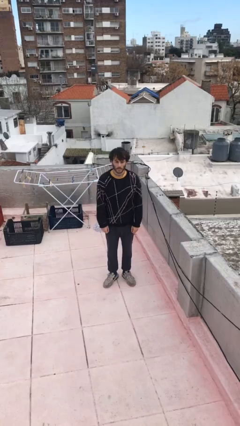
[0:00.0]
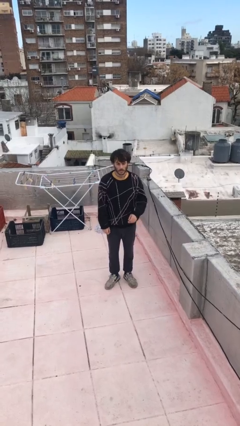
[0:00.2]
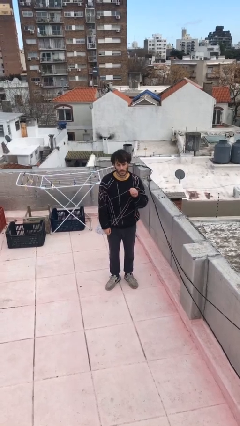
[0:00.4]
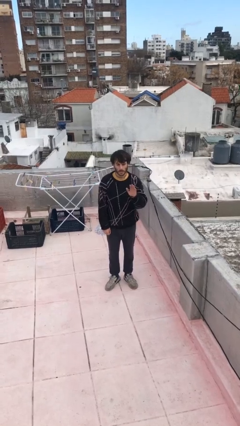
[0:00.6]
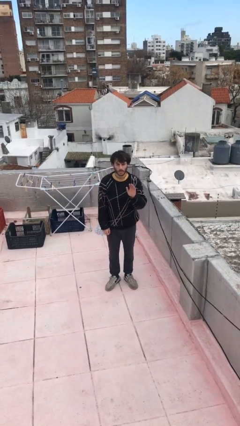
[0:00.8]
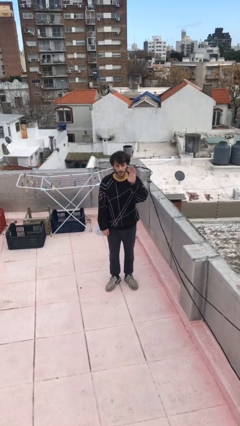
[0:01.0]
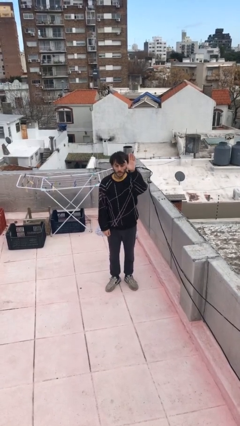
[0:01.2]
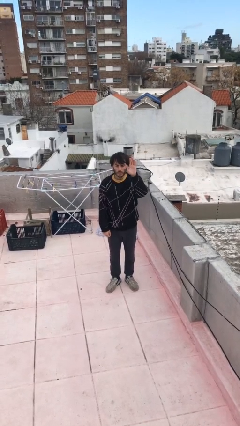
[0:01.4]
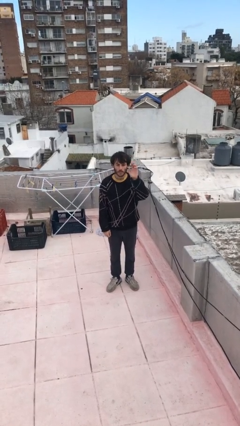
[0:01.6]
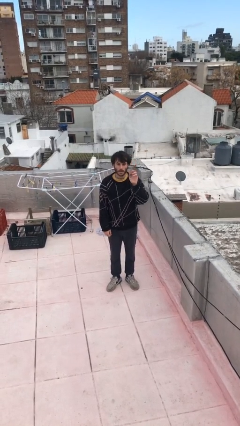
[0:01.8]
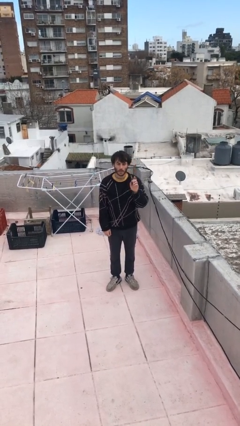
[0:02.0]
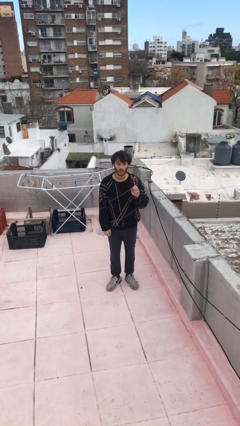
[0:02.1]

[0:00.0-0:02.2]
person gestures swipe up

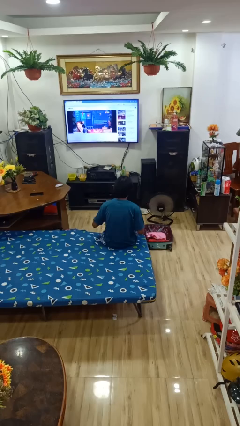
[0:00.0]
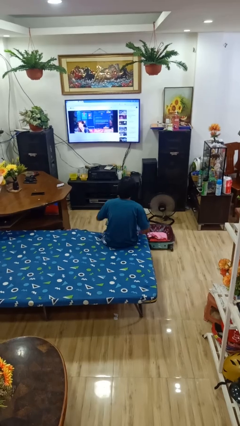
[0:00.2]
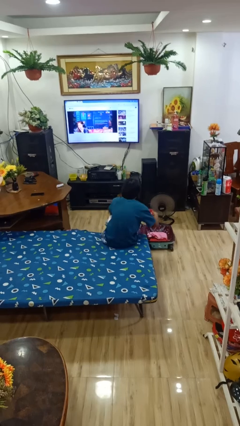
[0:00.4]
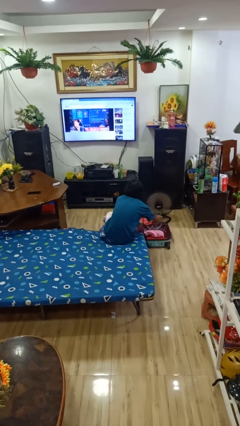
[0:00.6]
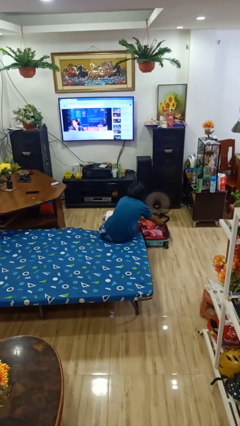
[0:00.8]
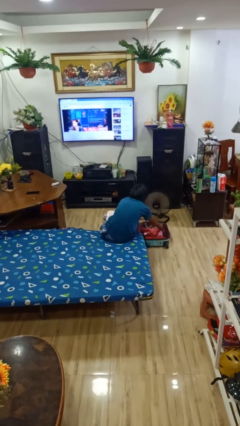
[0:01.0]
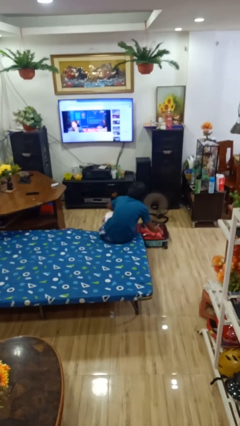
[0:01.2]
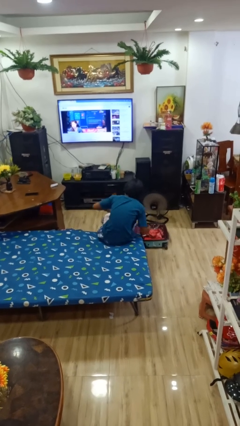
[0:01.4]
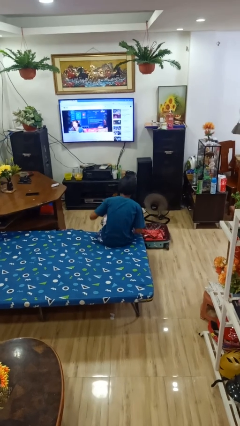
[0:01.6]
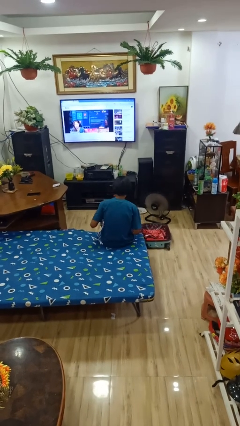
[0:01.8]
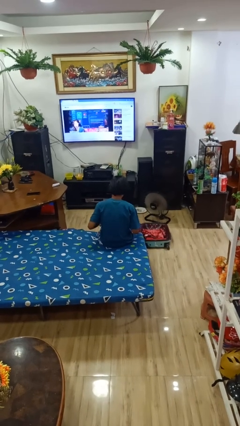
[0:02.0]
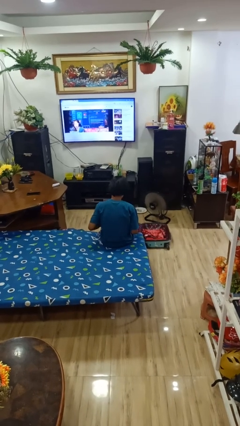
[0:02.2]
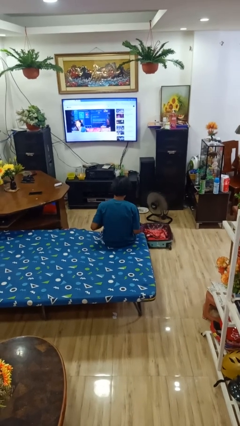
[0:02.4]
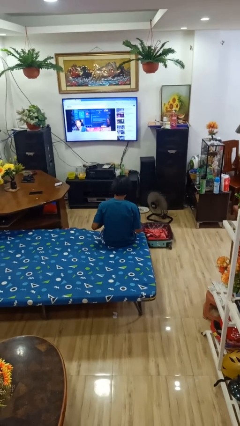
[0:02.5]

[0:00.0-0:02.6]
person loads clothes into suitcase

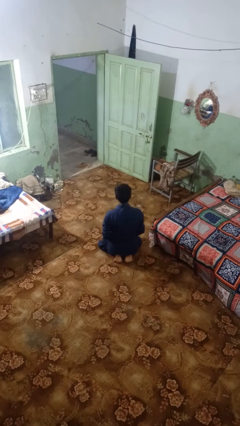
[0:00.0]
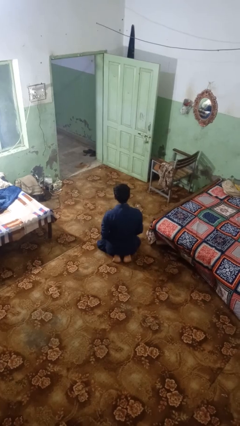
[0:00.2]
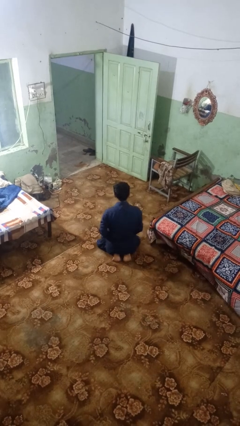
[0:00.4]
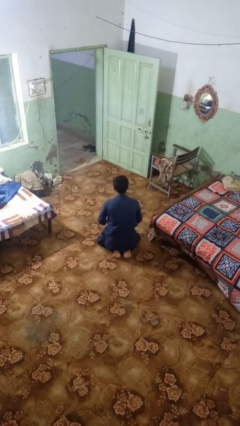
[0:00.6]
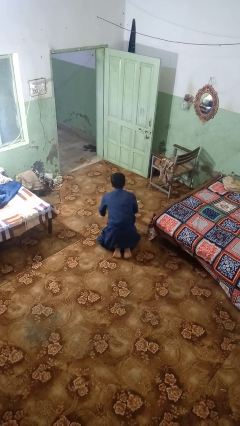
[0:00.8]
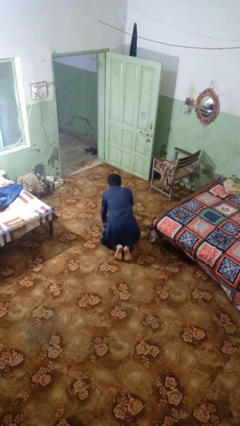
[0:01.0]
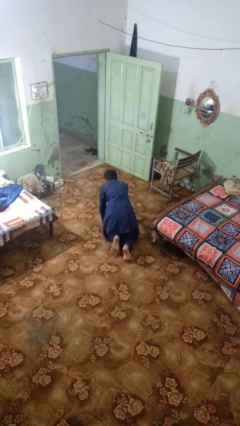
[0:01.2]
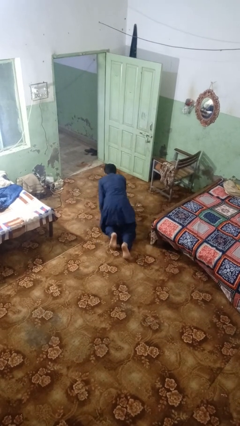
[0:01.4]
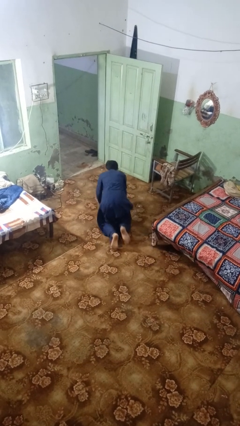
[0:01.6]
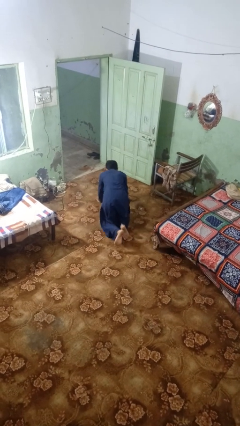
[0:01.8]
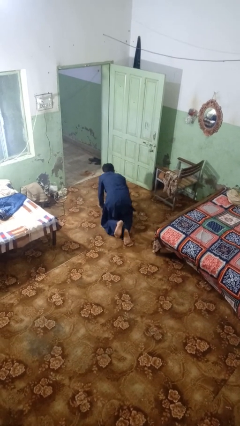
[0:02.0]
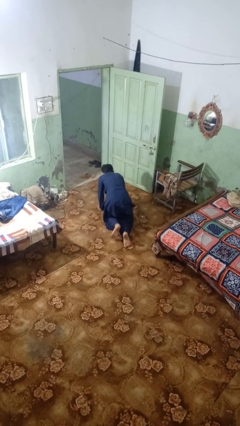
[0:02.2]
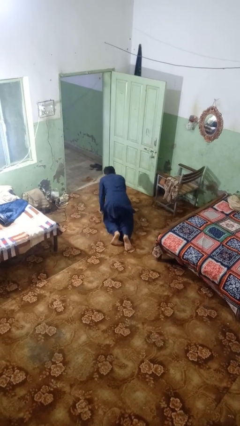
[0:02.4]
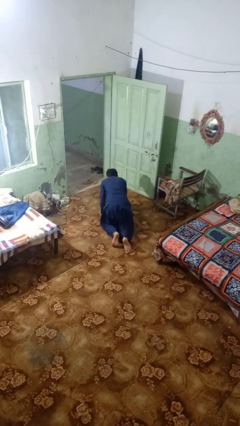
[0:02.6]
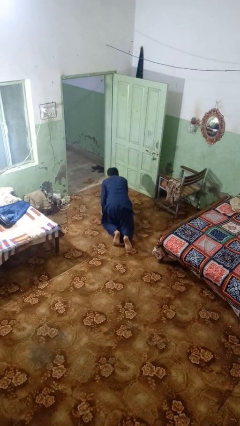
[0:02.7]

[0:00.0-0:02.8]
person crawls

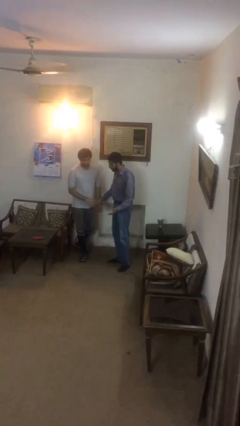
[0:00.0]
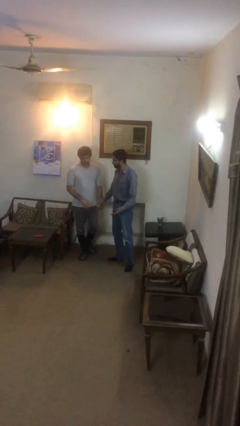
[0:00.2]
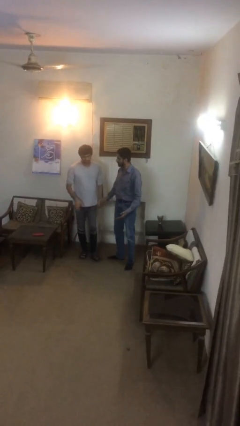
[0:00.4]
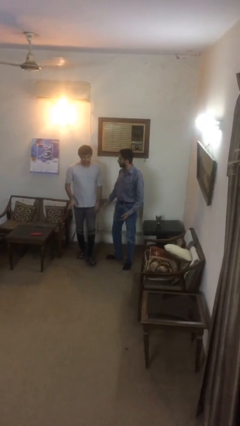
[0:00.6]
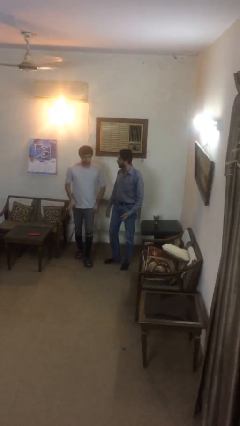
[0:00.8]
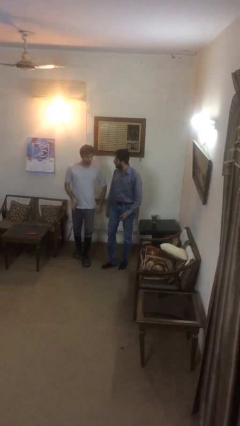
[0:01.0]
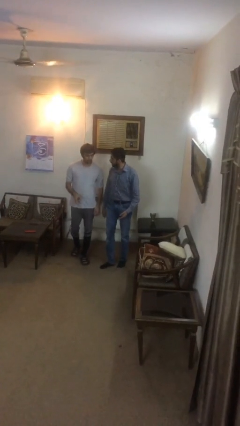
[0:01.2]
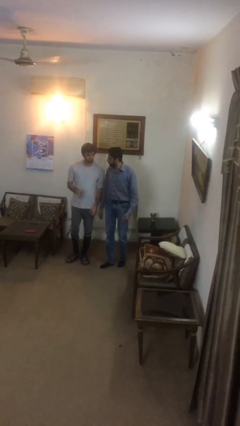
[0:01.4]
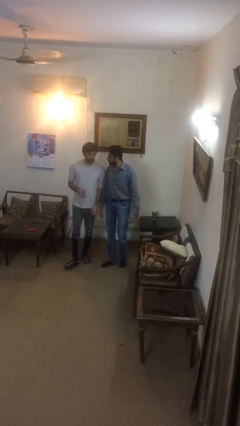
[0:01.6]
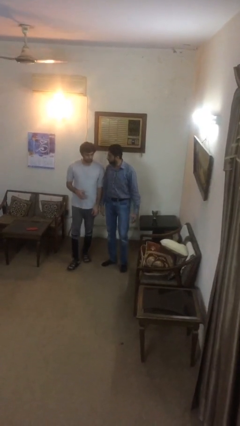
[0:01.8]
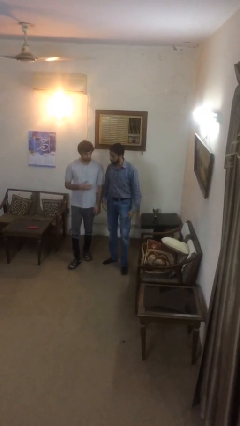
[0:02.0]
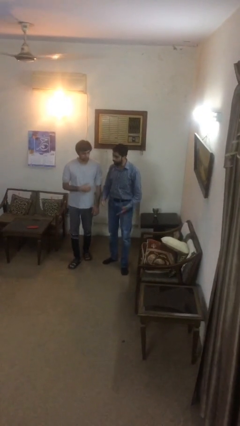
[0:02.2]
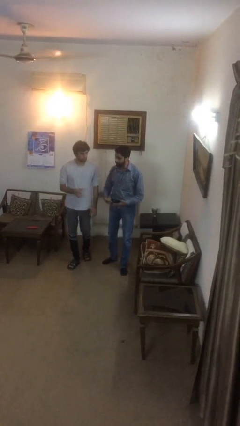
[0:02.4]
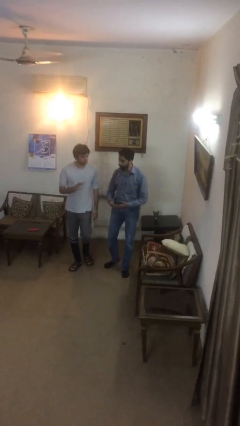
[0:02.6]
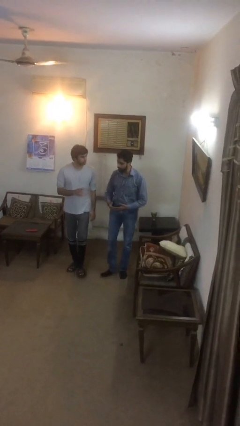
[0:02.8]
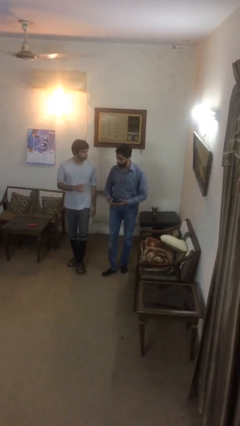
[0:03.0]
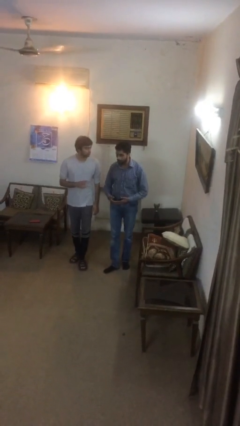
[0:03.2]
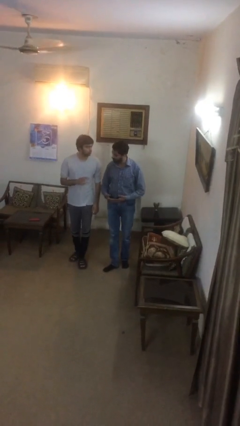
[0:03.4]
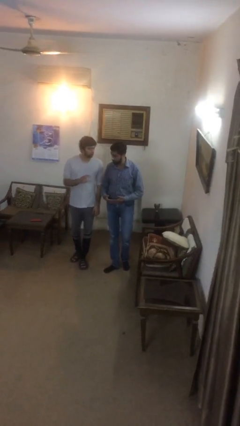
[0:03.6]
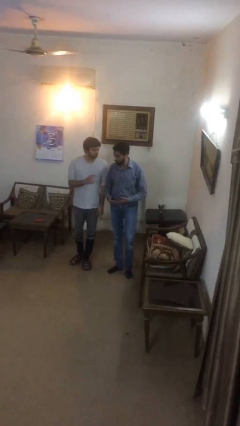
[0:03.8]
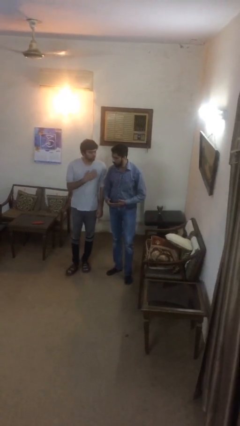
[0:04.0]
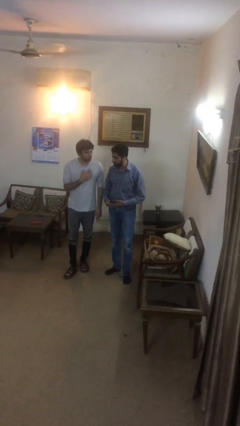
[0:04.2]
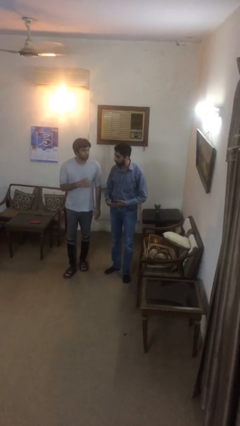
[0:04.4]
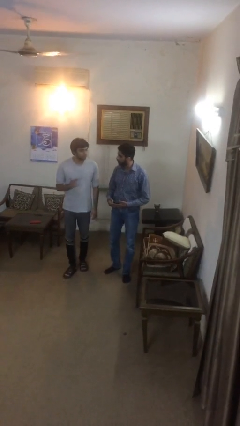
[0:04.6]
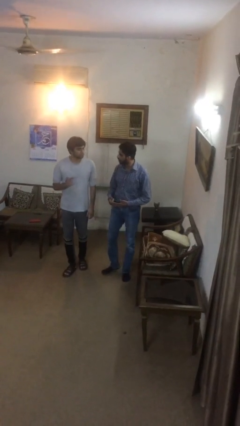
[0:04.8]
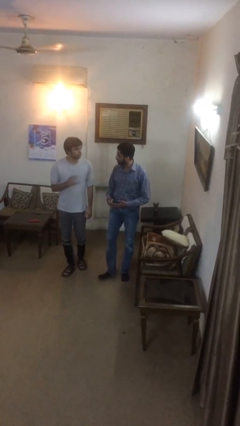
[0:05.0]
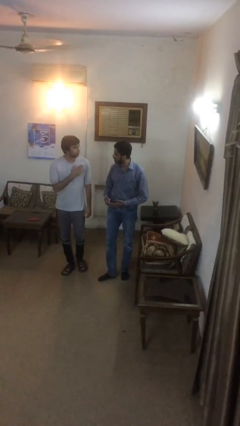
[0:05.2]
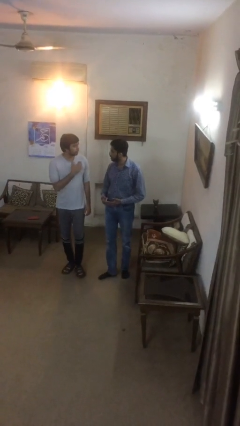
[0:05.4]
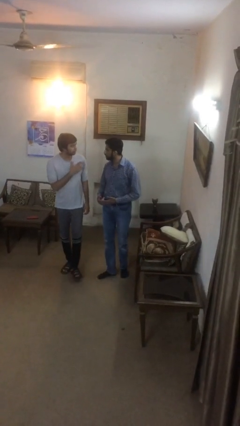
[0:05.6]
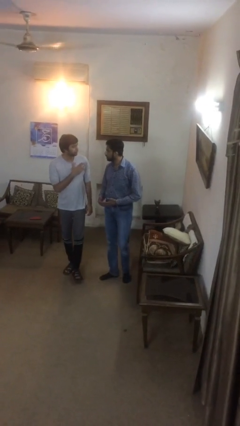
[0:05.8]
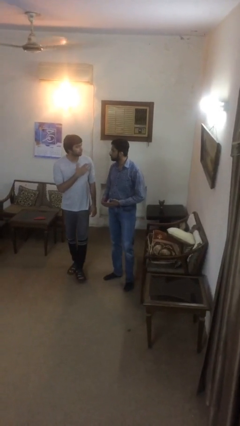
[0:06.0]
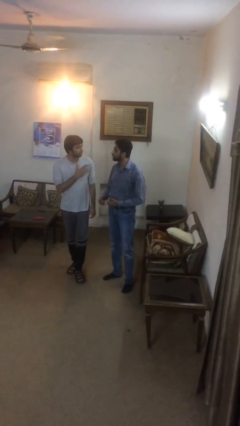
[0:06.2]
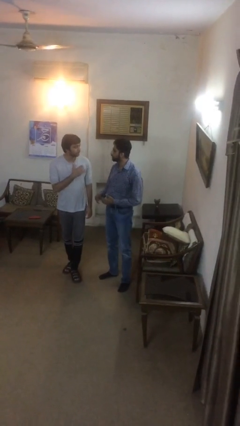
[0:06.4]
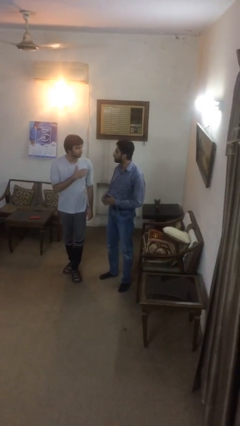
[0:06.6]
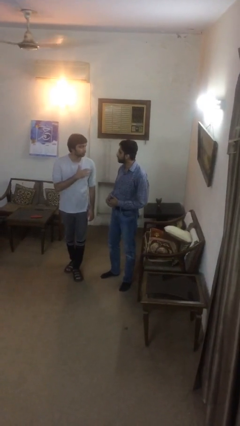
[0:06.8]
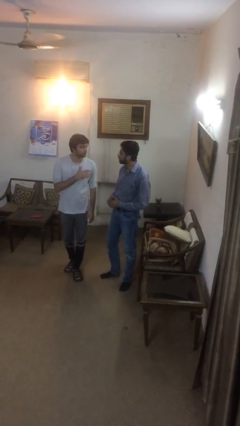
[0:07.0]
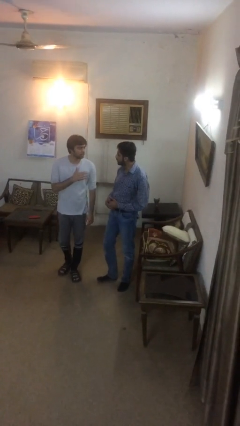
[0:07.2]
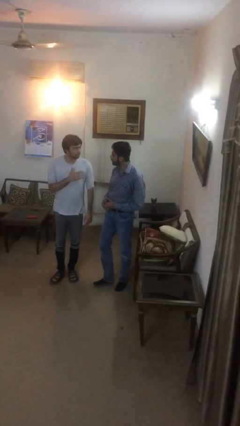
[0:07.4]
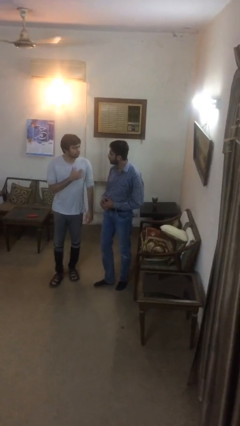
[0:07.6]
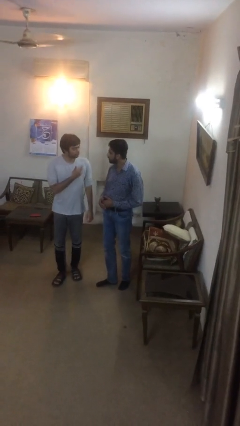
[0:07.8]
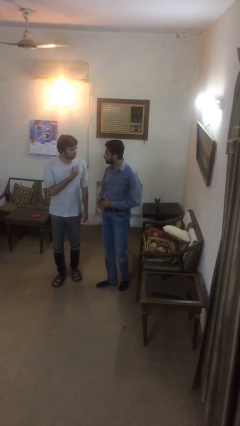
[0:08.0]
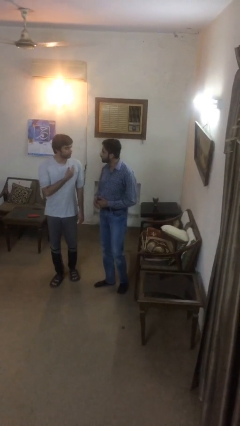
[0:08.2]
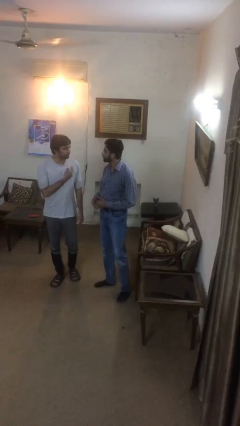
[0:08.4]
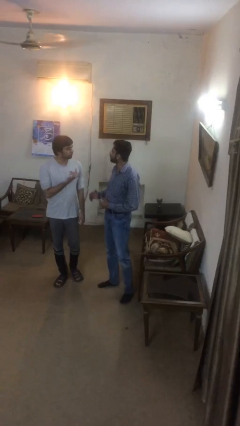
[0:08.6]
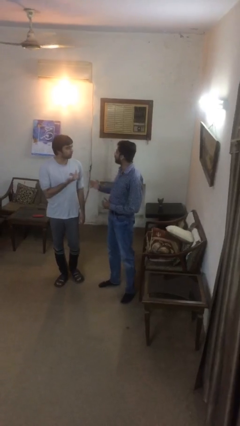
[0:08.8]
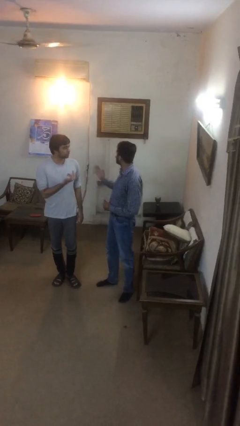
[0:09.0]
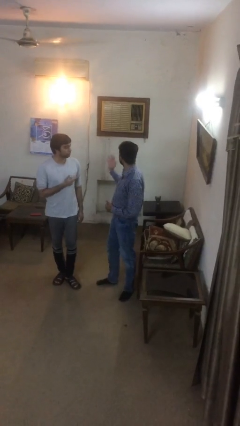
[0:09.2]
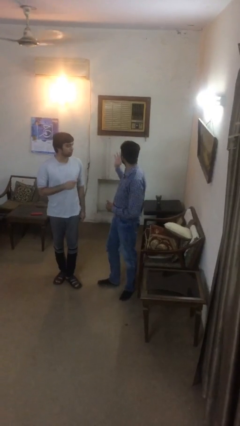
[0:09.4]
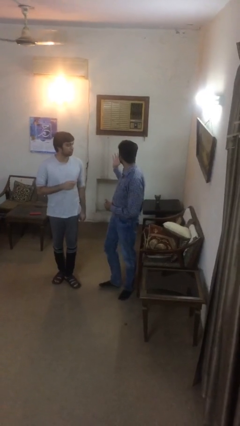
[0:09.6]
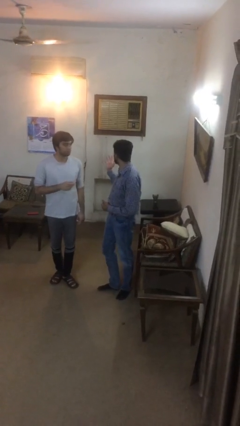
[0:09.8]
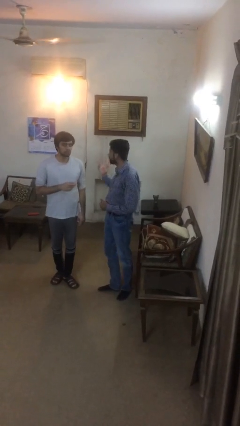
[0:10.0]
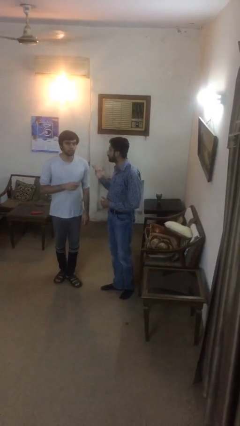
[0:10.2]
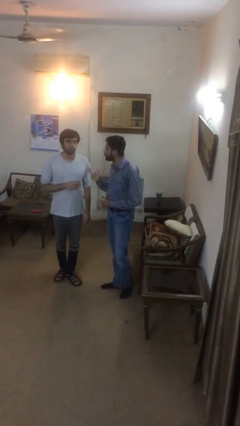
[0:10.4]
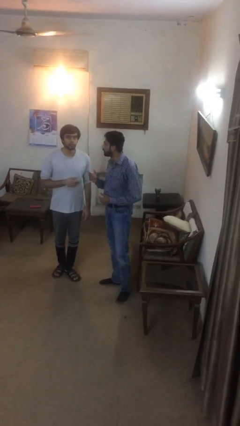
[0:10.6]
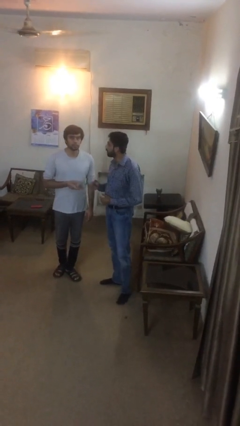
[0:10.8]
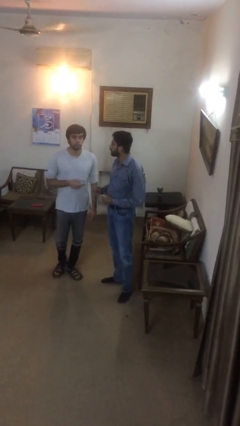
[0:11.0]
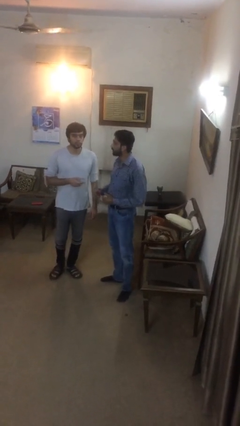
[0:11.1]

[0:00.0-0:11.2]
person talks to person
